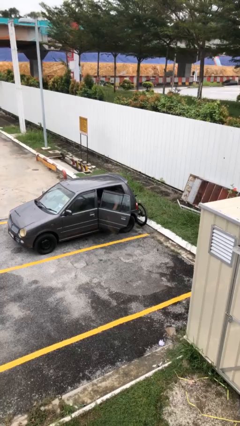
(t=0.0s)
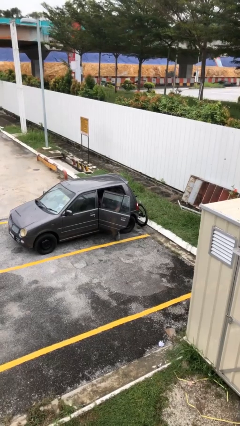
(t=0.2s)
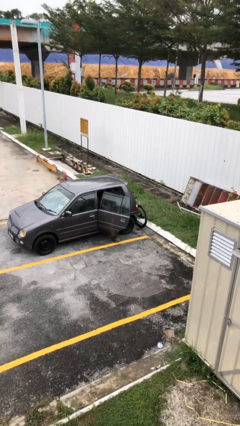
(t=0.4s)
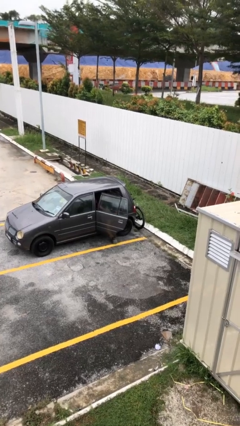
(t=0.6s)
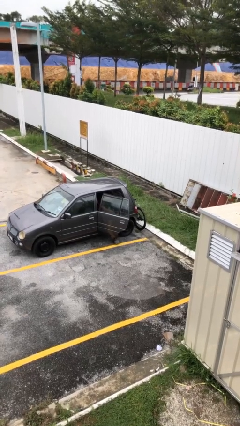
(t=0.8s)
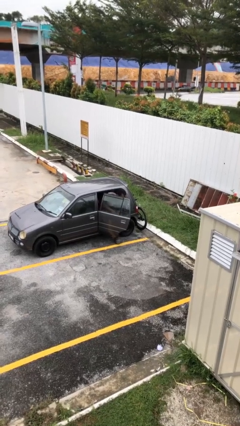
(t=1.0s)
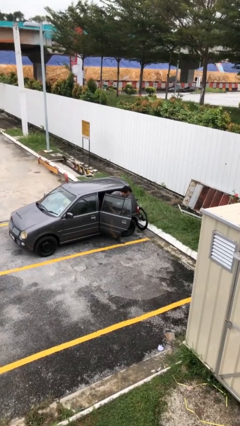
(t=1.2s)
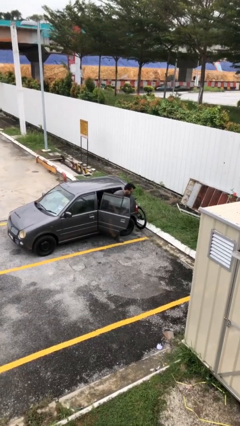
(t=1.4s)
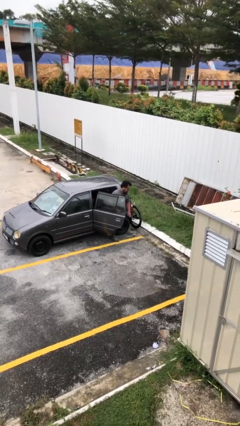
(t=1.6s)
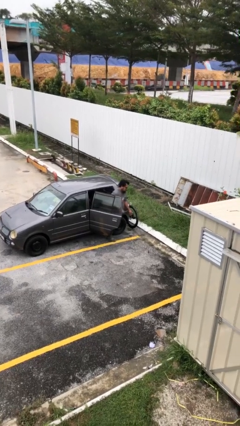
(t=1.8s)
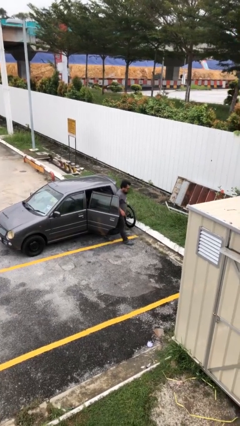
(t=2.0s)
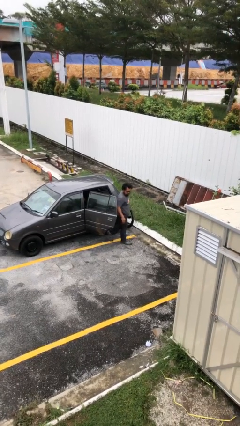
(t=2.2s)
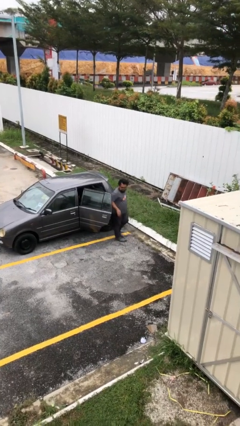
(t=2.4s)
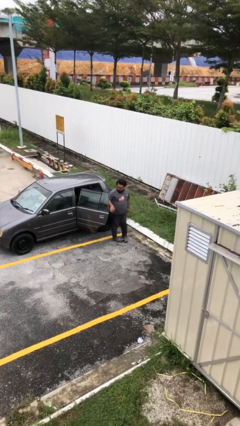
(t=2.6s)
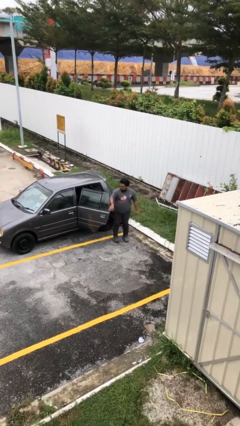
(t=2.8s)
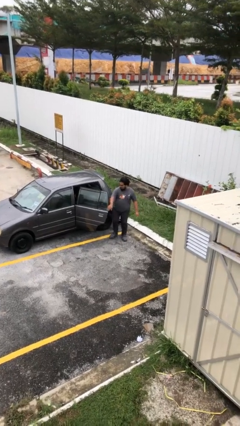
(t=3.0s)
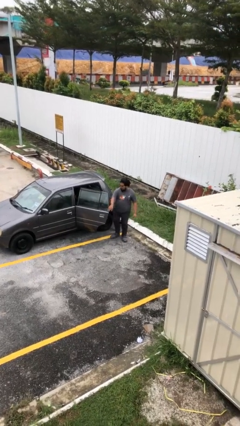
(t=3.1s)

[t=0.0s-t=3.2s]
person exits car

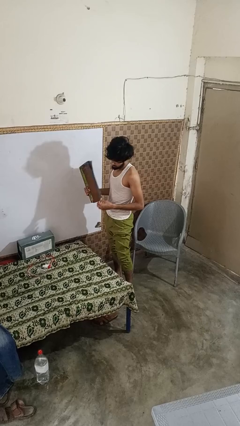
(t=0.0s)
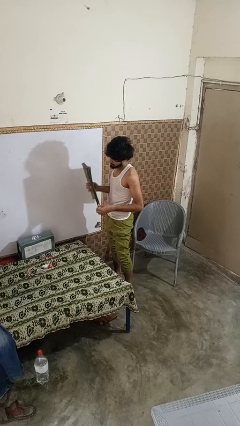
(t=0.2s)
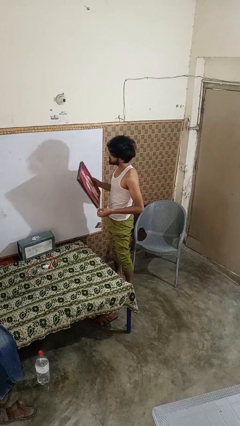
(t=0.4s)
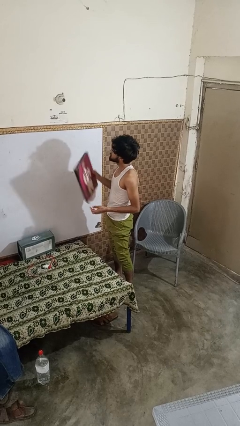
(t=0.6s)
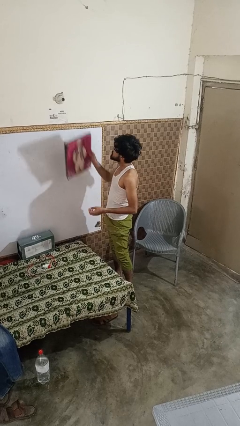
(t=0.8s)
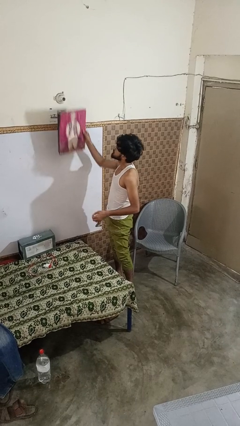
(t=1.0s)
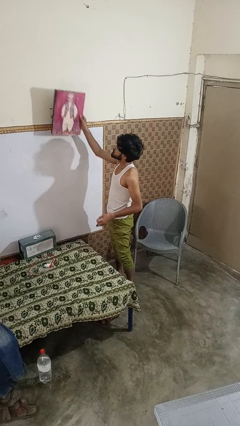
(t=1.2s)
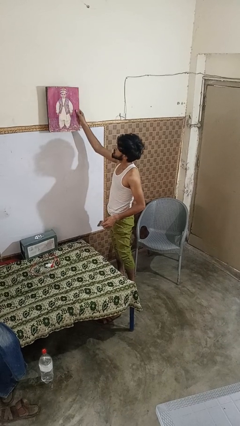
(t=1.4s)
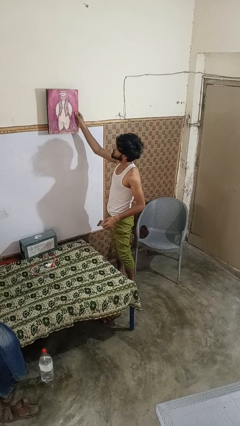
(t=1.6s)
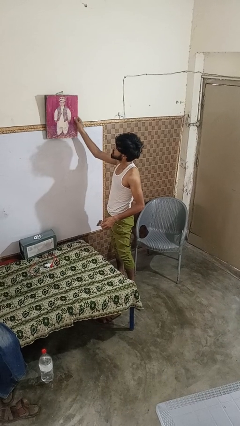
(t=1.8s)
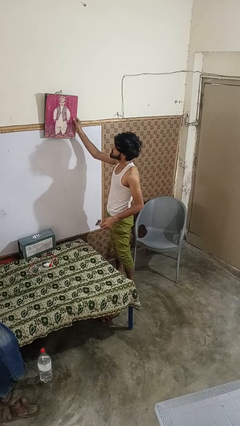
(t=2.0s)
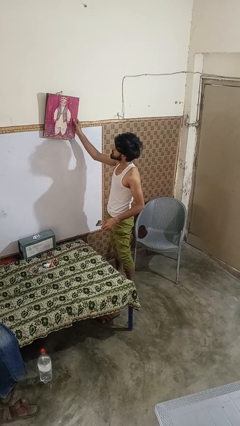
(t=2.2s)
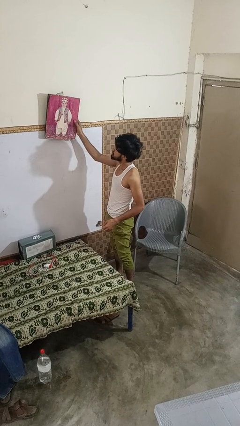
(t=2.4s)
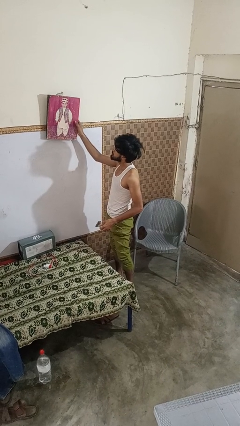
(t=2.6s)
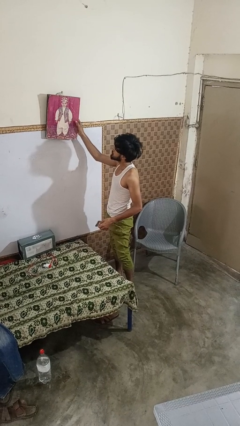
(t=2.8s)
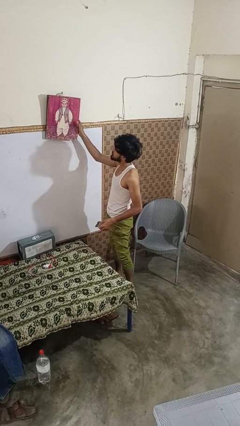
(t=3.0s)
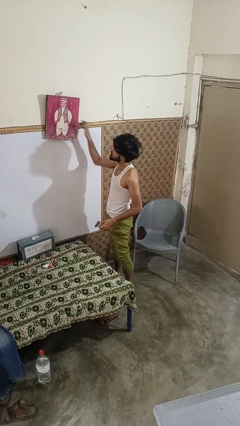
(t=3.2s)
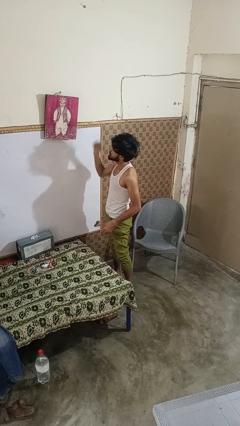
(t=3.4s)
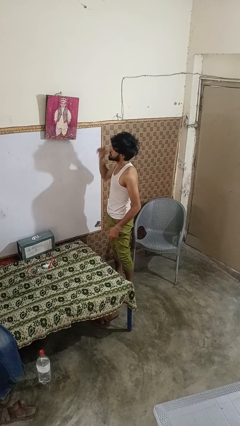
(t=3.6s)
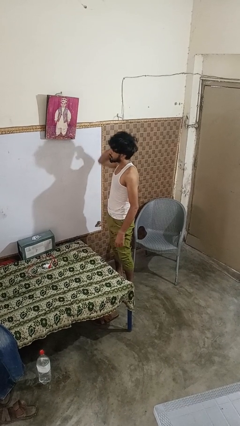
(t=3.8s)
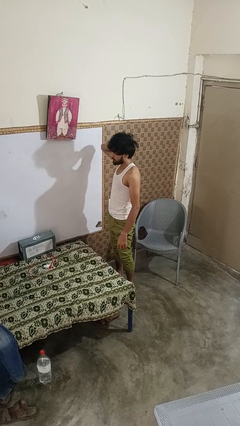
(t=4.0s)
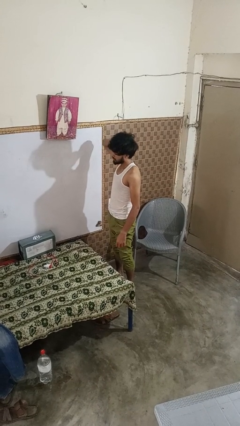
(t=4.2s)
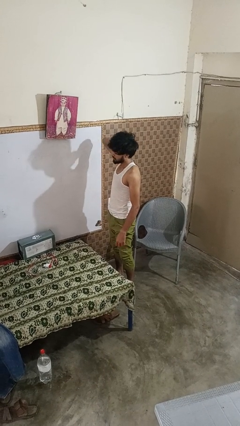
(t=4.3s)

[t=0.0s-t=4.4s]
person puts up picture frame

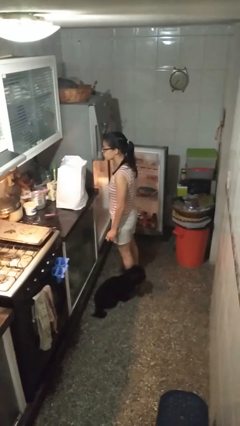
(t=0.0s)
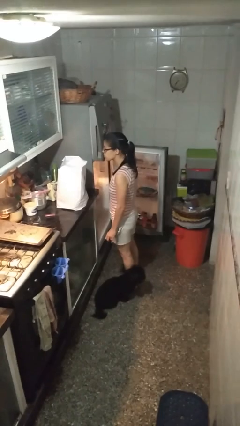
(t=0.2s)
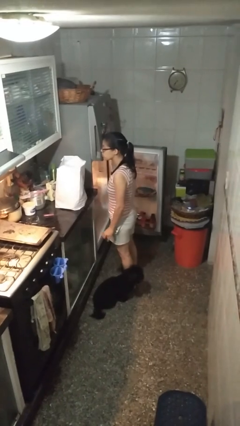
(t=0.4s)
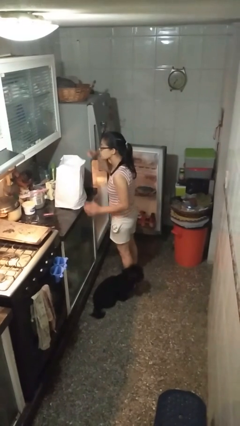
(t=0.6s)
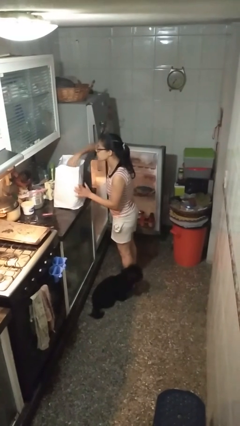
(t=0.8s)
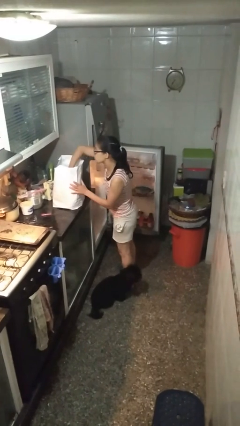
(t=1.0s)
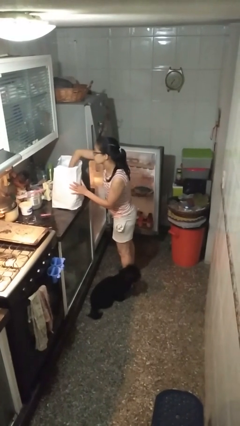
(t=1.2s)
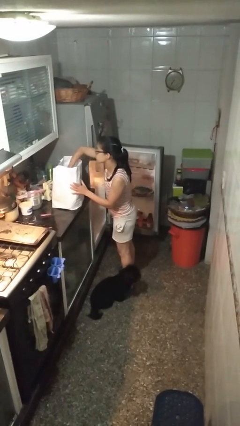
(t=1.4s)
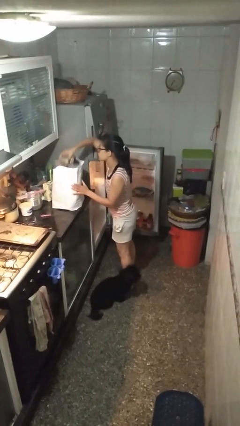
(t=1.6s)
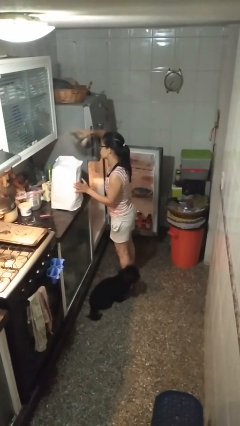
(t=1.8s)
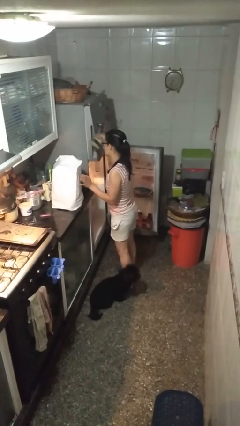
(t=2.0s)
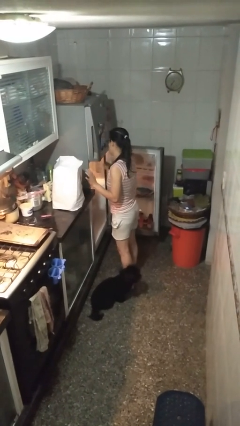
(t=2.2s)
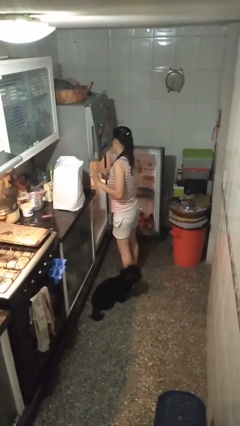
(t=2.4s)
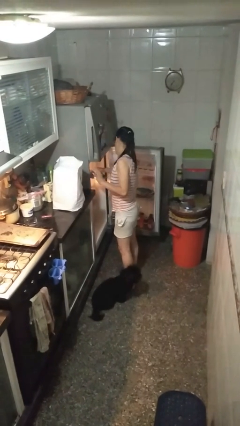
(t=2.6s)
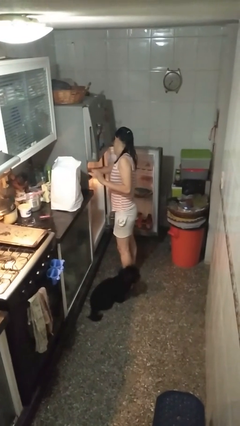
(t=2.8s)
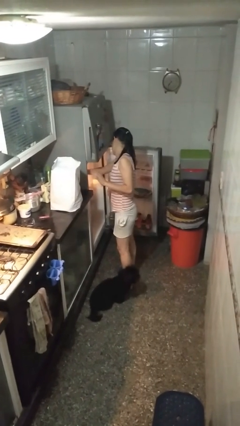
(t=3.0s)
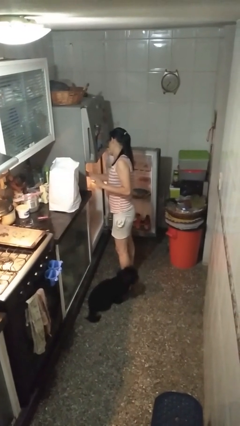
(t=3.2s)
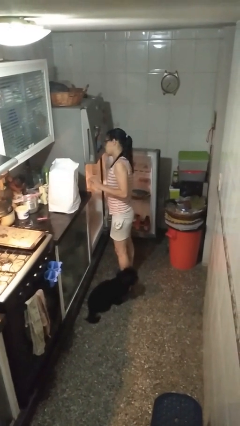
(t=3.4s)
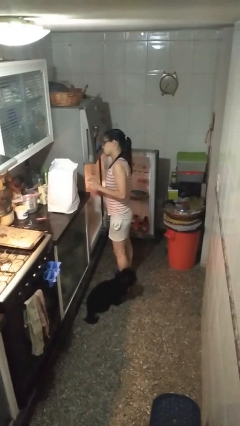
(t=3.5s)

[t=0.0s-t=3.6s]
person loads groceries into refrigerator

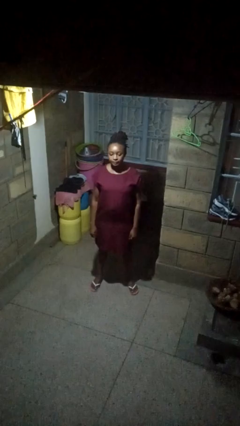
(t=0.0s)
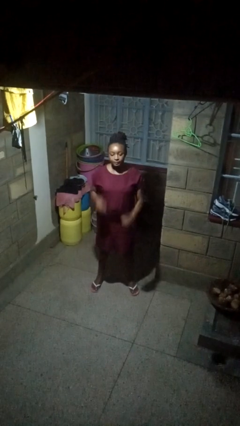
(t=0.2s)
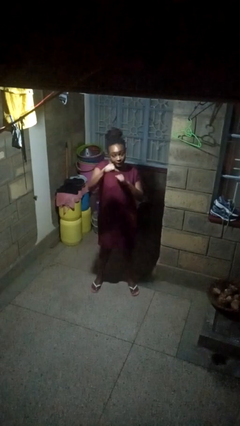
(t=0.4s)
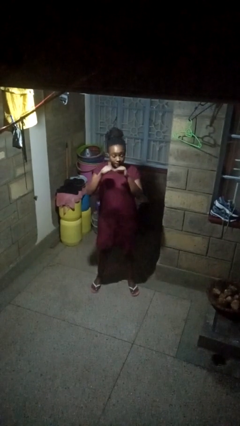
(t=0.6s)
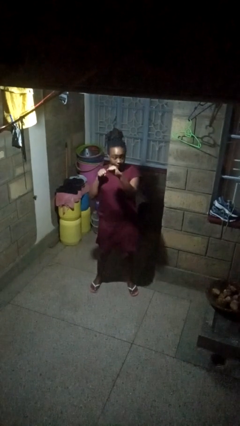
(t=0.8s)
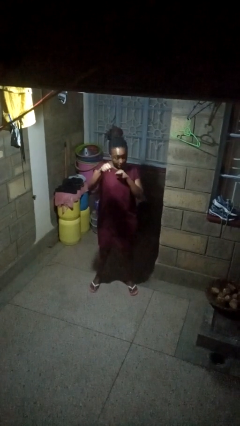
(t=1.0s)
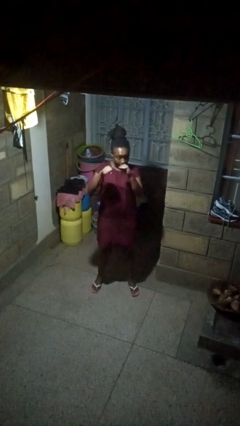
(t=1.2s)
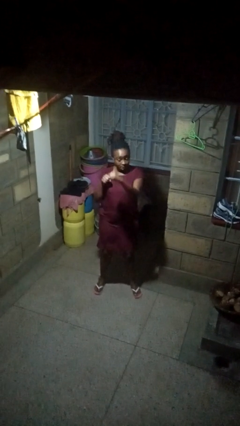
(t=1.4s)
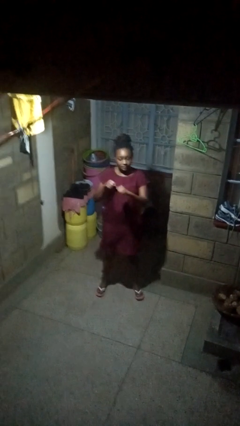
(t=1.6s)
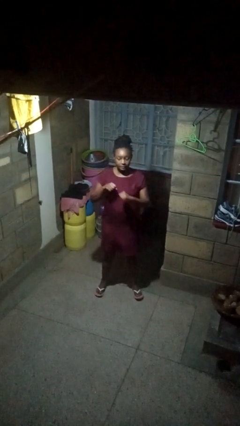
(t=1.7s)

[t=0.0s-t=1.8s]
person punches

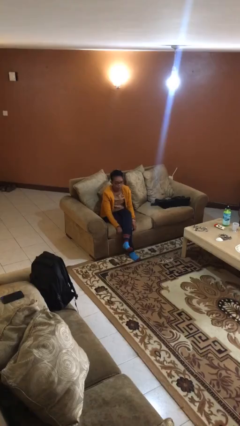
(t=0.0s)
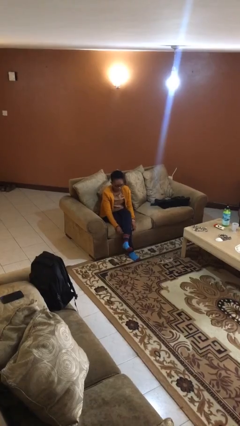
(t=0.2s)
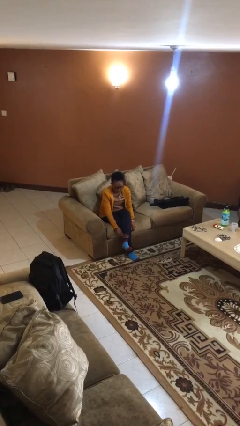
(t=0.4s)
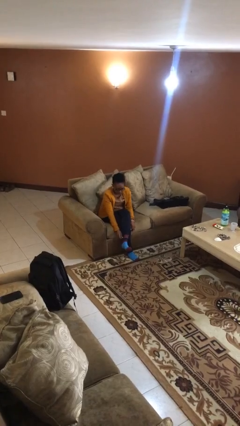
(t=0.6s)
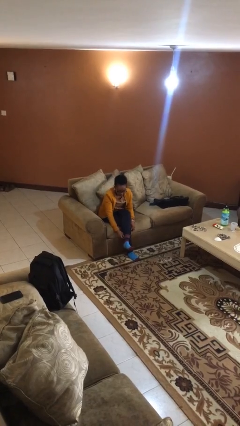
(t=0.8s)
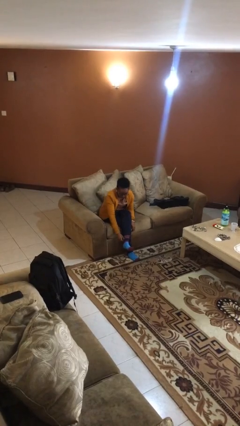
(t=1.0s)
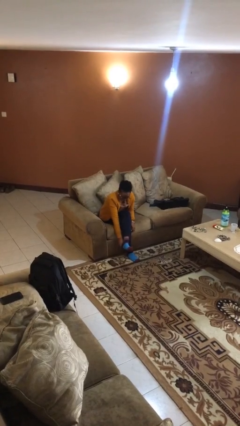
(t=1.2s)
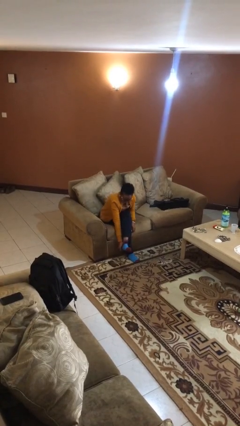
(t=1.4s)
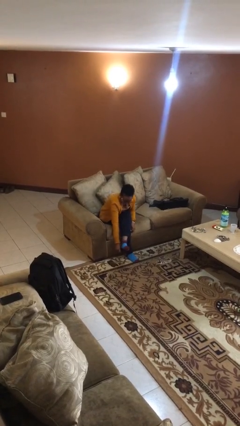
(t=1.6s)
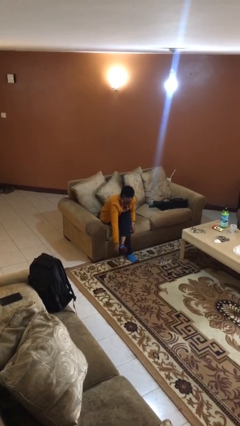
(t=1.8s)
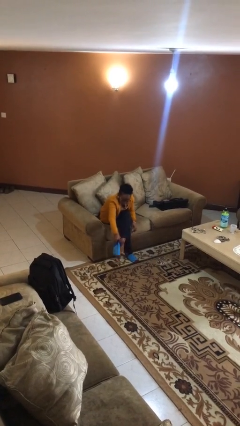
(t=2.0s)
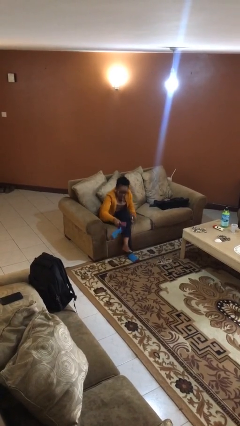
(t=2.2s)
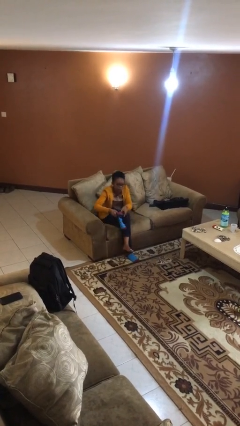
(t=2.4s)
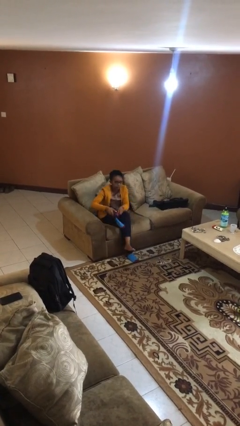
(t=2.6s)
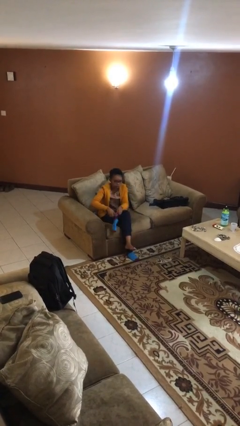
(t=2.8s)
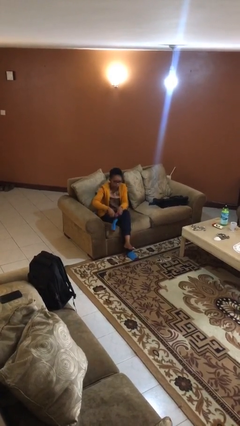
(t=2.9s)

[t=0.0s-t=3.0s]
person takes off socks

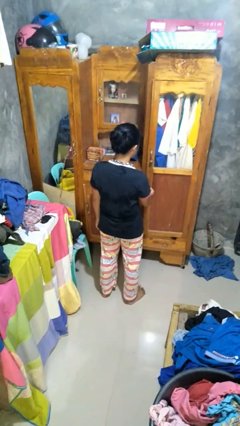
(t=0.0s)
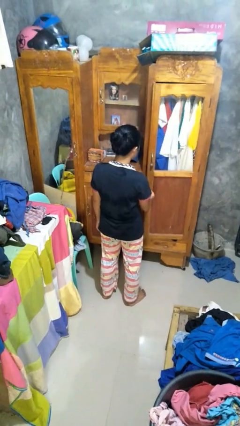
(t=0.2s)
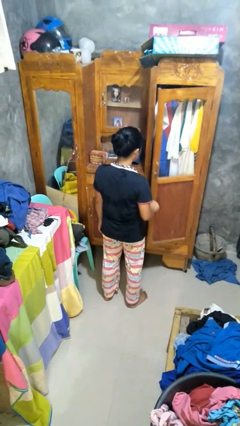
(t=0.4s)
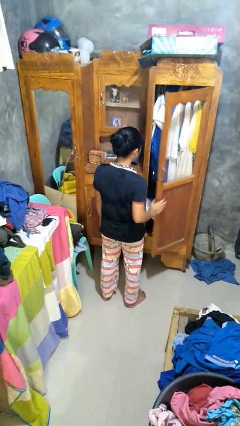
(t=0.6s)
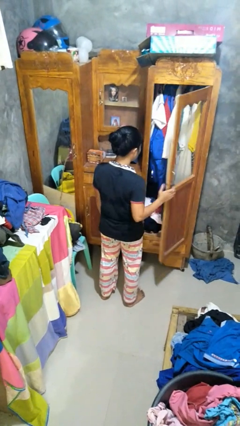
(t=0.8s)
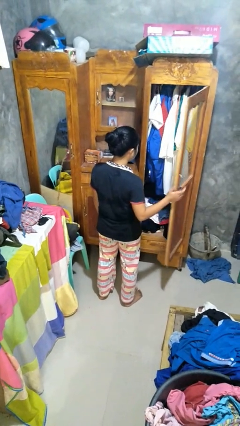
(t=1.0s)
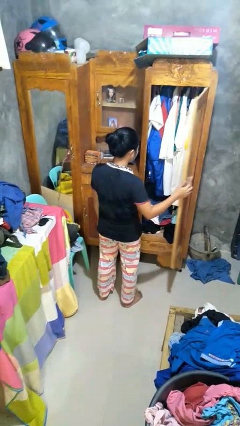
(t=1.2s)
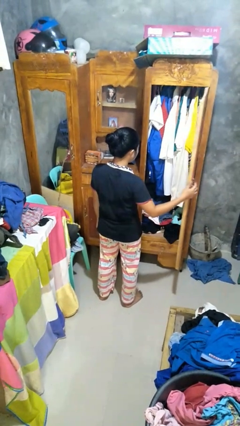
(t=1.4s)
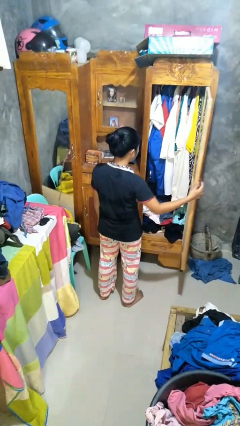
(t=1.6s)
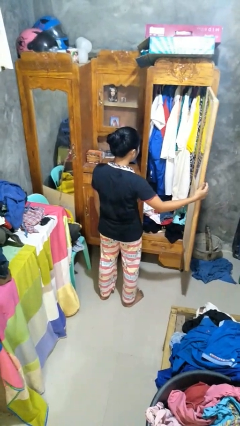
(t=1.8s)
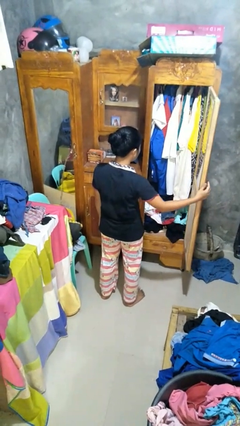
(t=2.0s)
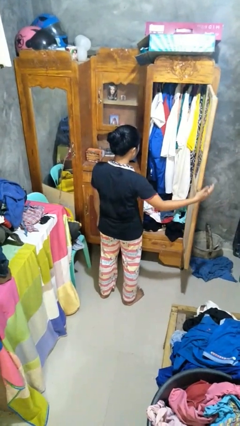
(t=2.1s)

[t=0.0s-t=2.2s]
person opens closet door
